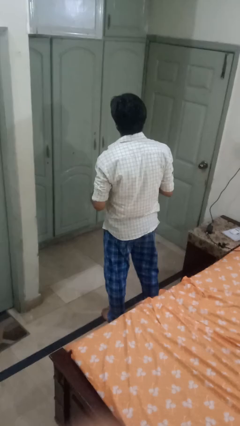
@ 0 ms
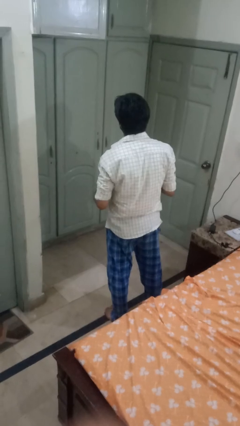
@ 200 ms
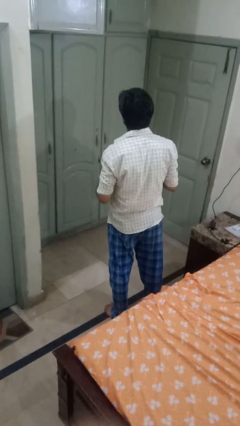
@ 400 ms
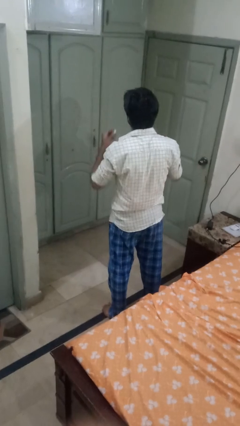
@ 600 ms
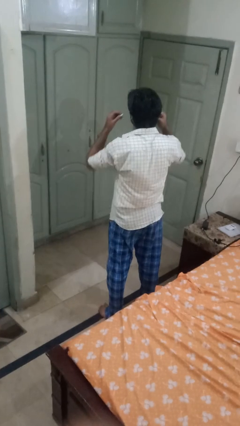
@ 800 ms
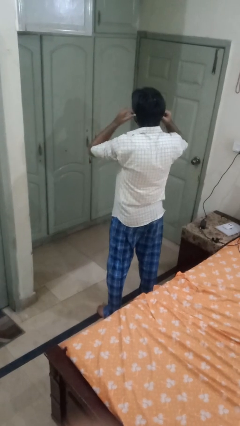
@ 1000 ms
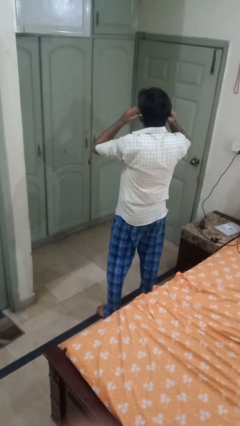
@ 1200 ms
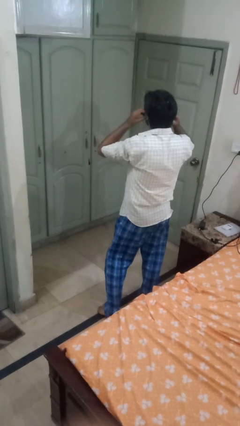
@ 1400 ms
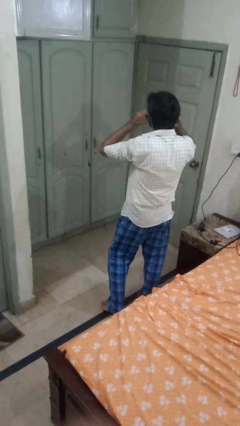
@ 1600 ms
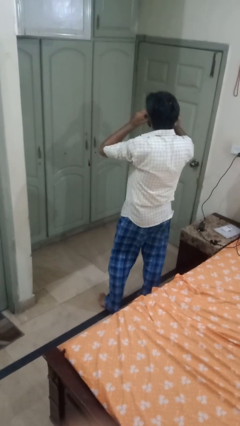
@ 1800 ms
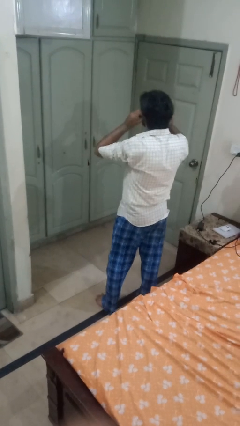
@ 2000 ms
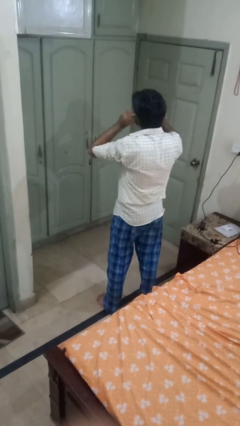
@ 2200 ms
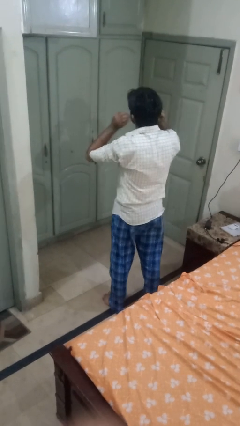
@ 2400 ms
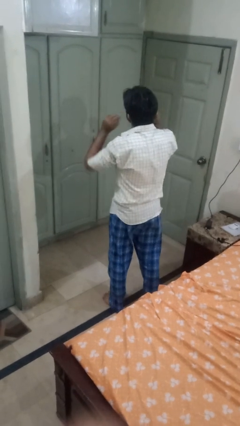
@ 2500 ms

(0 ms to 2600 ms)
person puts on headphones

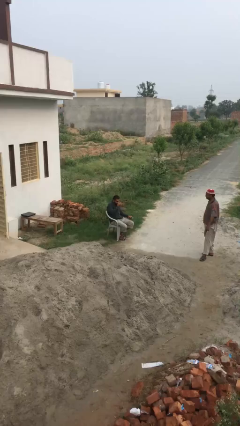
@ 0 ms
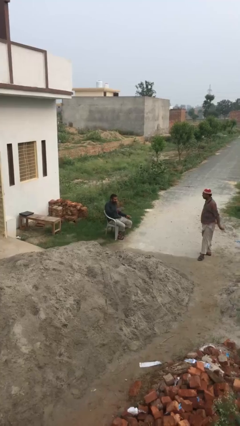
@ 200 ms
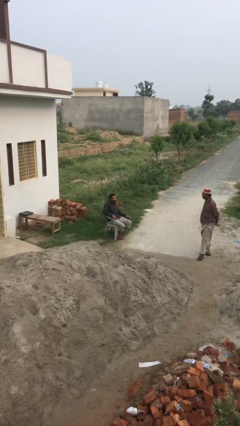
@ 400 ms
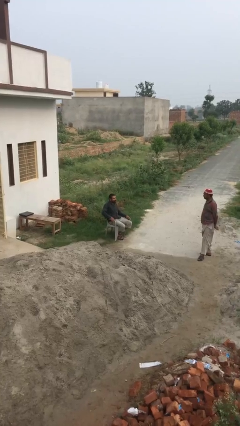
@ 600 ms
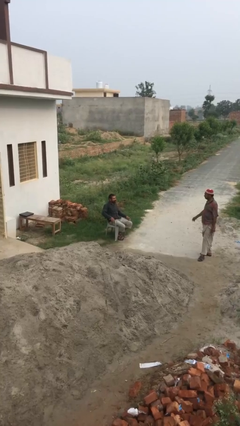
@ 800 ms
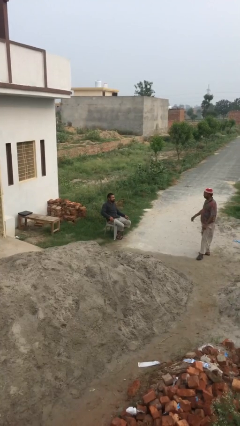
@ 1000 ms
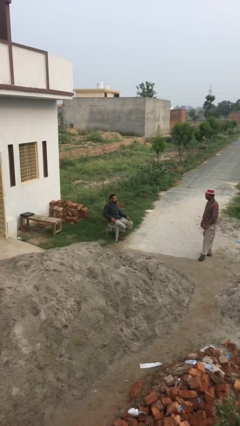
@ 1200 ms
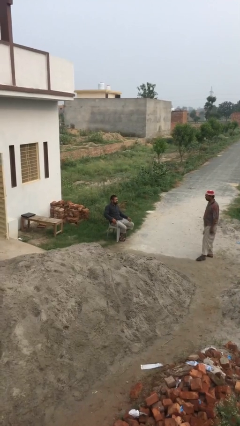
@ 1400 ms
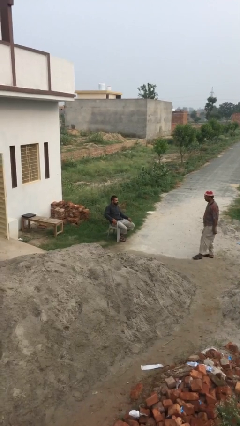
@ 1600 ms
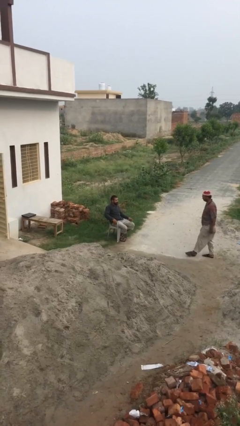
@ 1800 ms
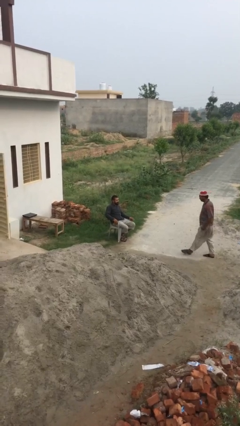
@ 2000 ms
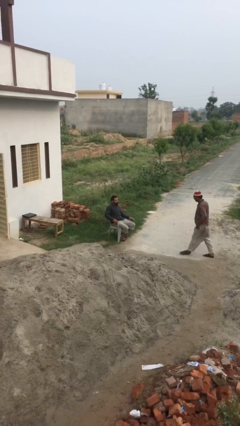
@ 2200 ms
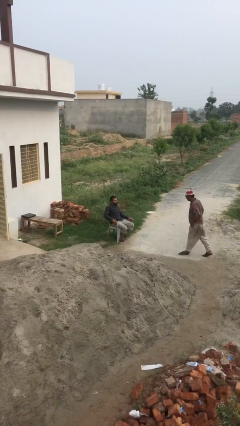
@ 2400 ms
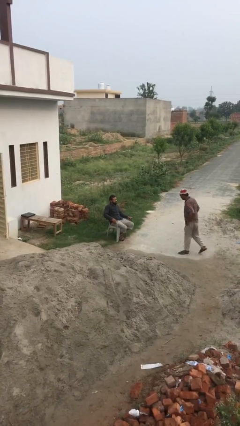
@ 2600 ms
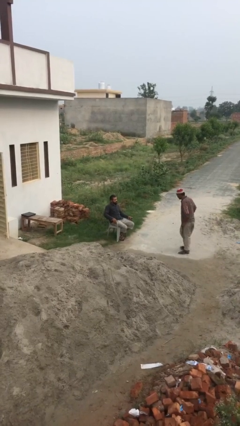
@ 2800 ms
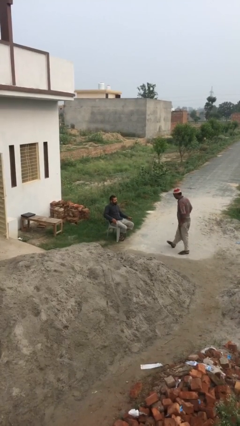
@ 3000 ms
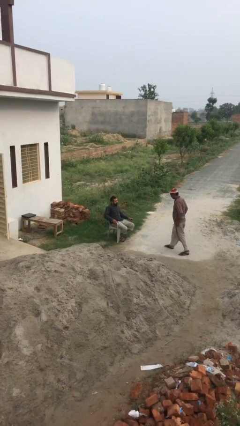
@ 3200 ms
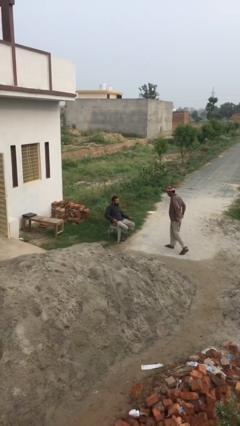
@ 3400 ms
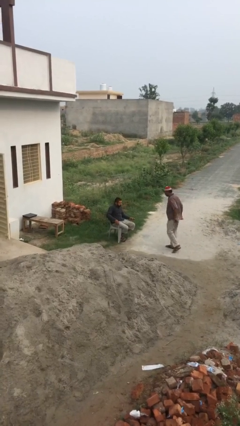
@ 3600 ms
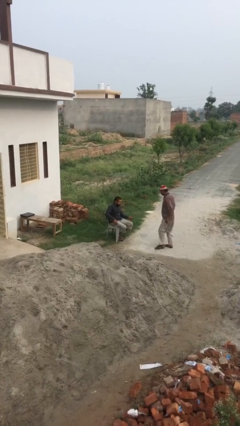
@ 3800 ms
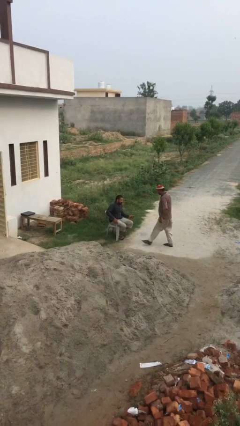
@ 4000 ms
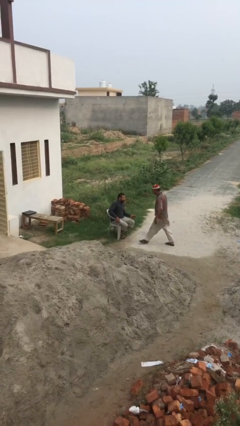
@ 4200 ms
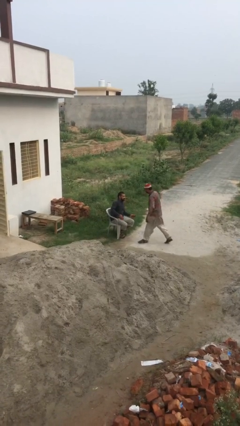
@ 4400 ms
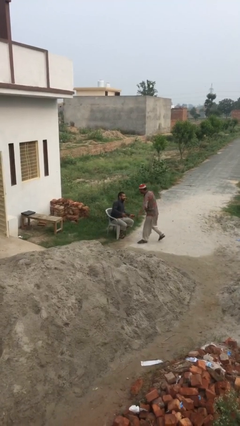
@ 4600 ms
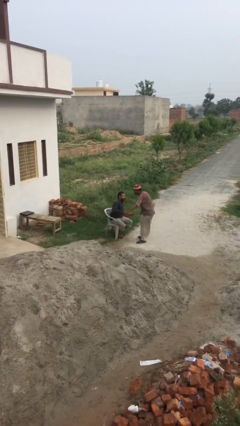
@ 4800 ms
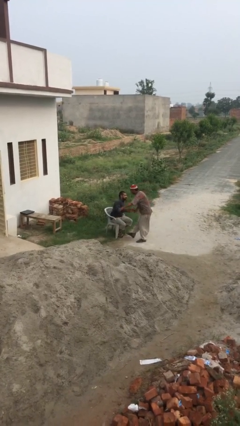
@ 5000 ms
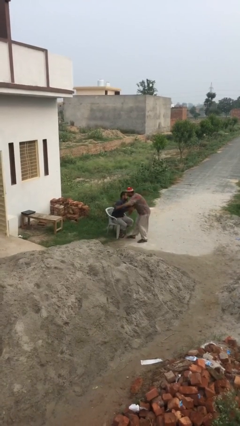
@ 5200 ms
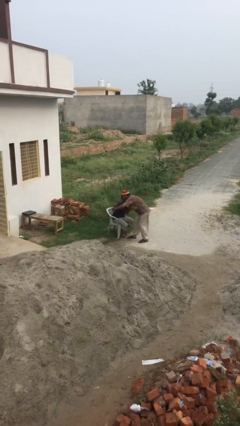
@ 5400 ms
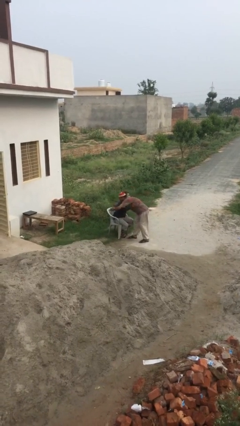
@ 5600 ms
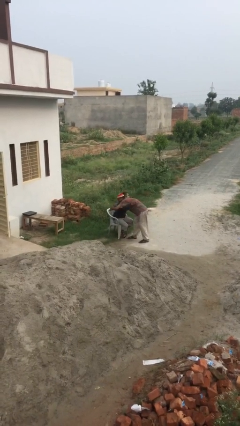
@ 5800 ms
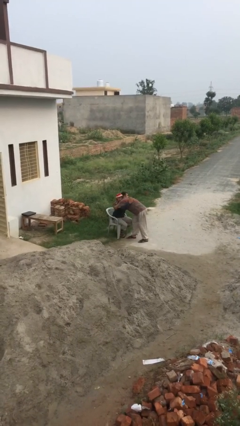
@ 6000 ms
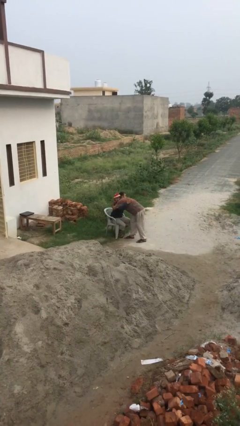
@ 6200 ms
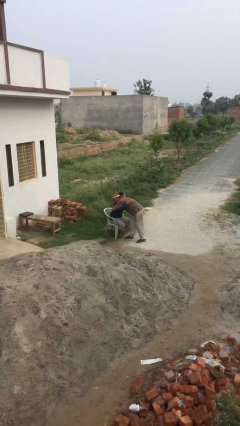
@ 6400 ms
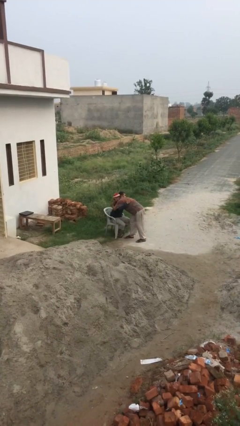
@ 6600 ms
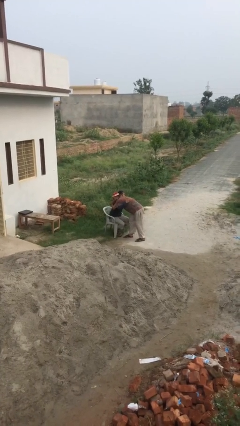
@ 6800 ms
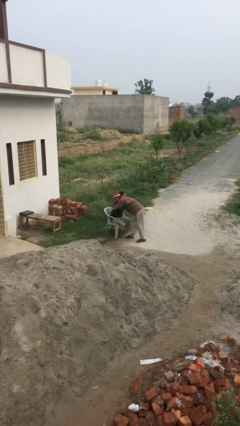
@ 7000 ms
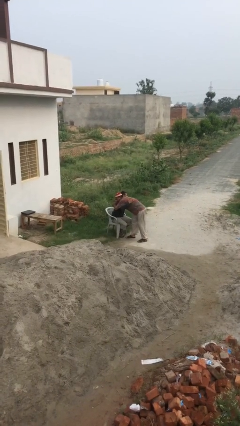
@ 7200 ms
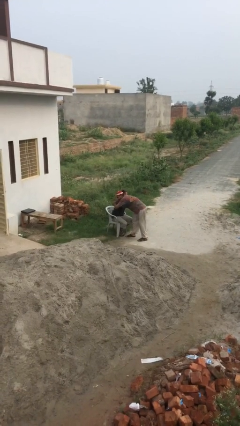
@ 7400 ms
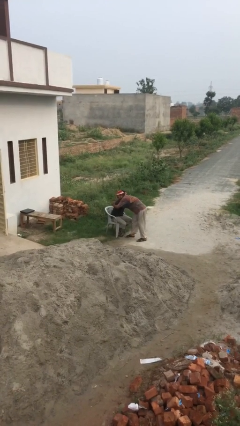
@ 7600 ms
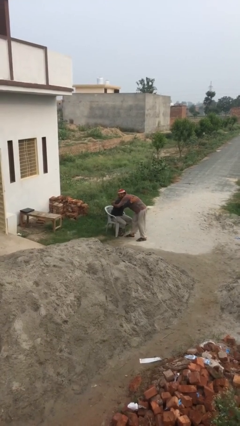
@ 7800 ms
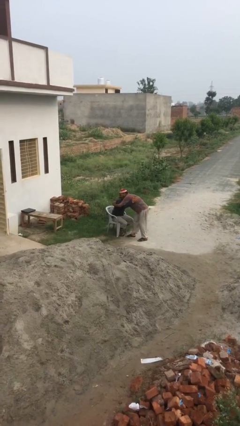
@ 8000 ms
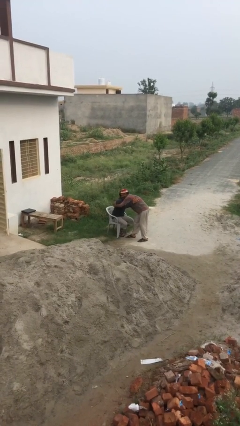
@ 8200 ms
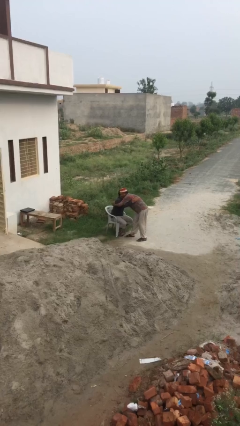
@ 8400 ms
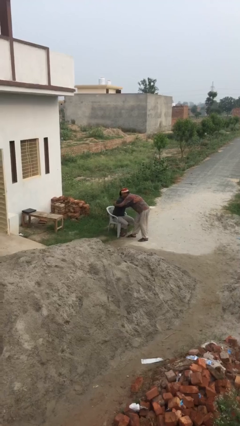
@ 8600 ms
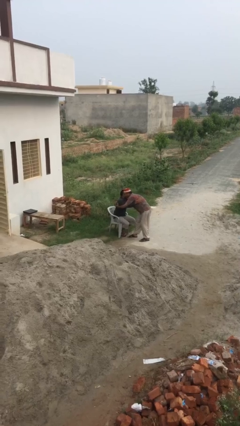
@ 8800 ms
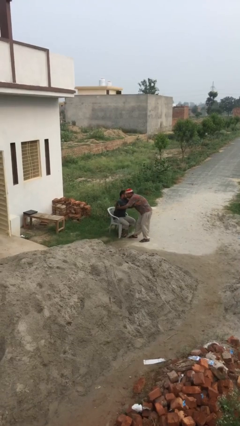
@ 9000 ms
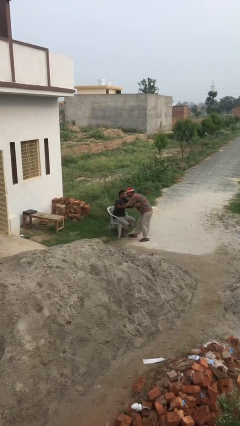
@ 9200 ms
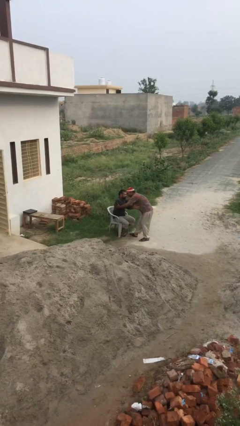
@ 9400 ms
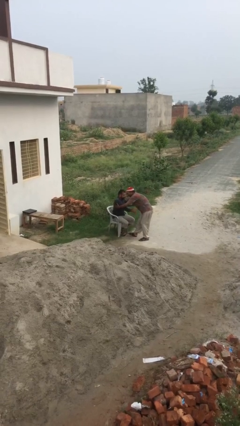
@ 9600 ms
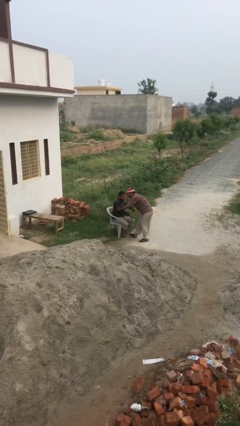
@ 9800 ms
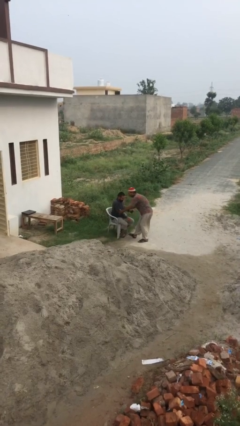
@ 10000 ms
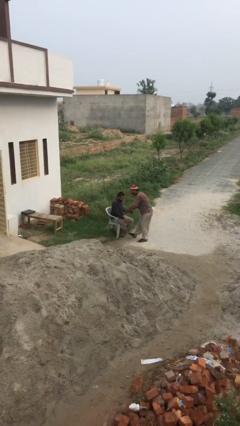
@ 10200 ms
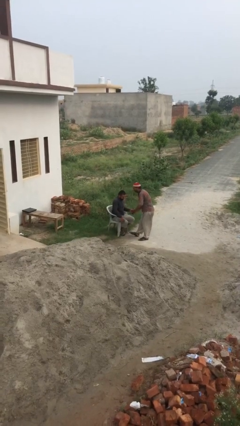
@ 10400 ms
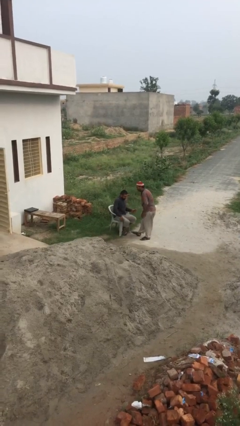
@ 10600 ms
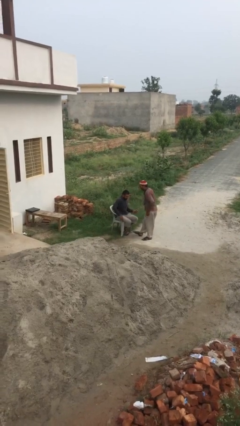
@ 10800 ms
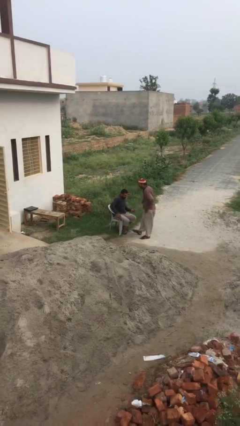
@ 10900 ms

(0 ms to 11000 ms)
person embraces person

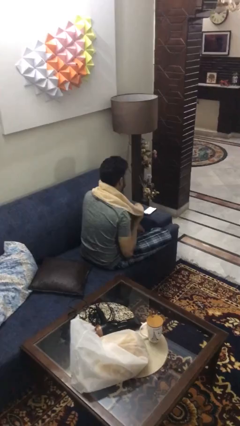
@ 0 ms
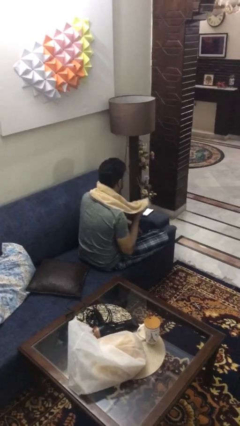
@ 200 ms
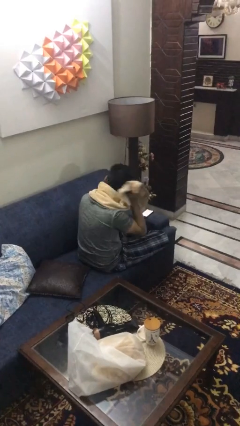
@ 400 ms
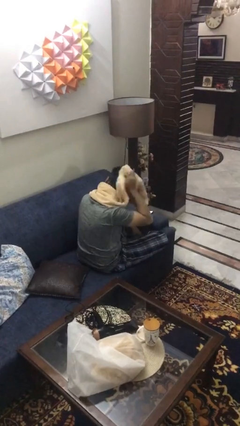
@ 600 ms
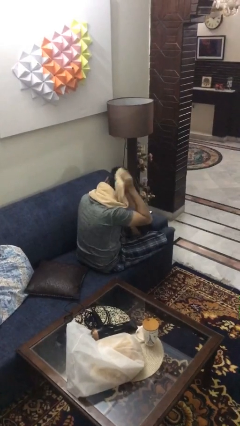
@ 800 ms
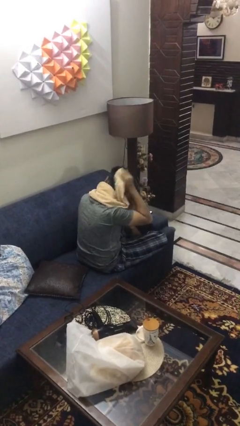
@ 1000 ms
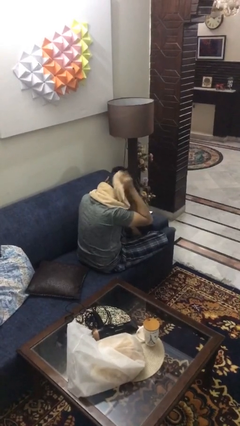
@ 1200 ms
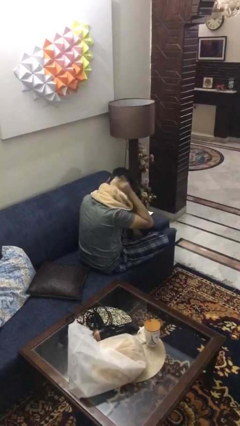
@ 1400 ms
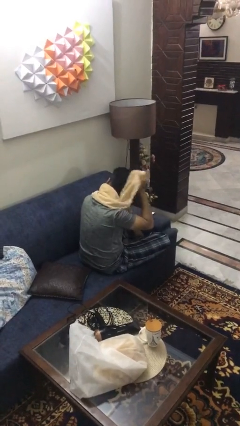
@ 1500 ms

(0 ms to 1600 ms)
person dries hair with towel

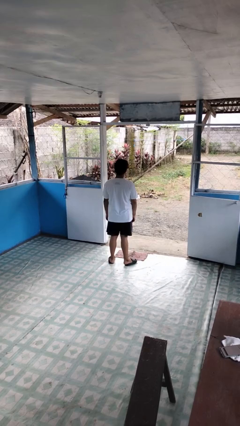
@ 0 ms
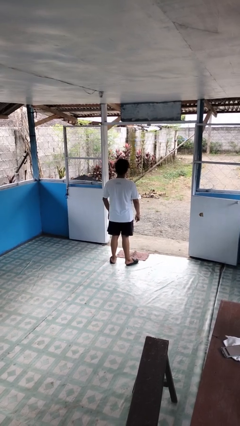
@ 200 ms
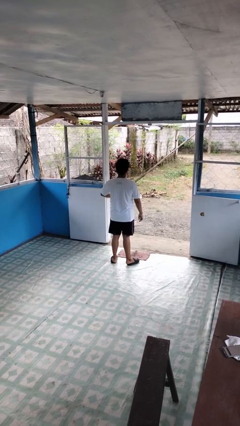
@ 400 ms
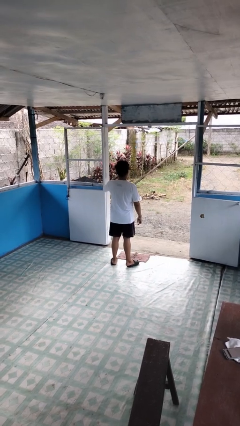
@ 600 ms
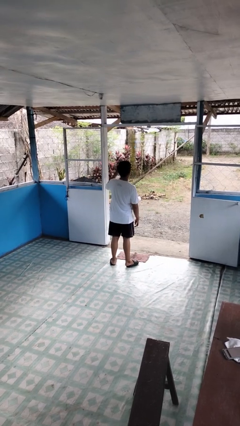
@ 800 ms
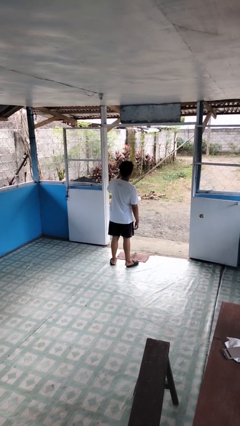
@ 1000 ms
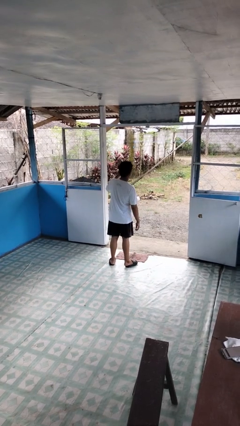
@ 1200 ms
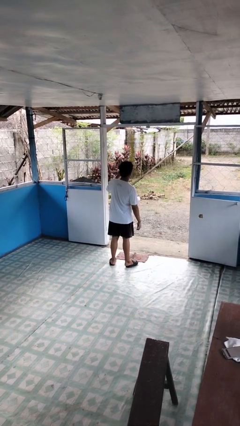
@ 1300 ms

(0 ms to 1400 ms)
person gestures number one

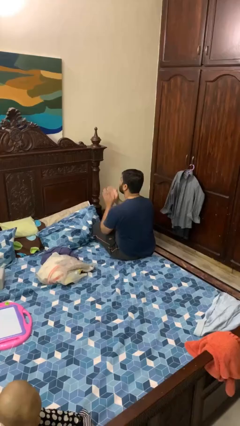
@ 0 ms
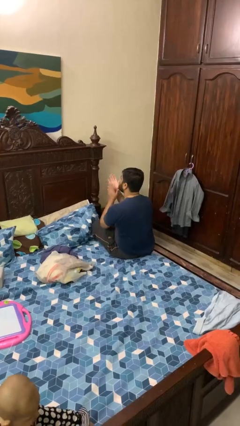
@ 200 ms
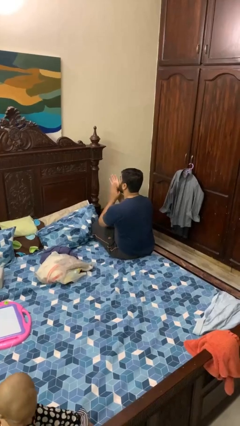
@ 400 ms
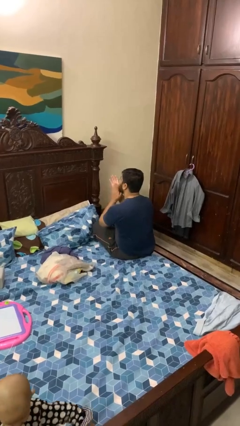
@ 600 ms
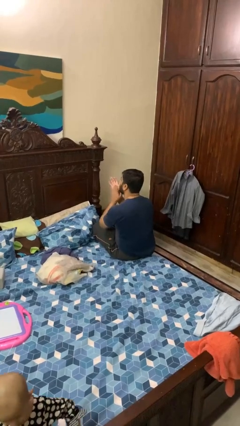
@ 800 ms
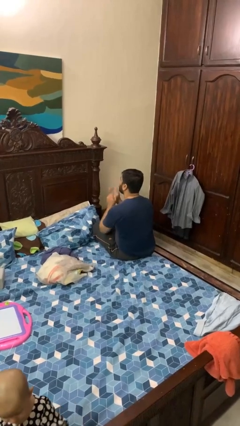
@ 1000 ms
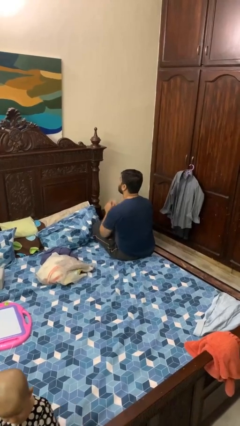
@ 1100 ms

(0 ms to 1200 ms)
person claps hands
